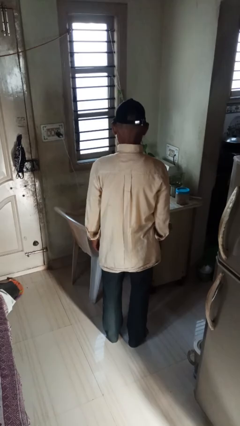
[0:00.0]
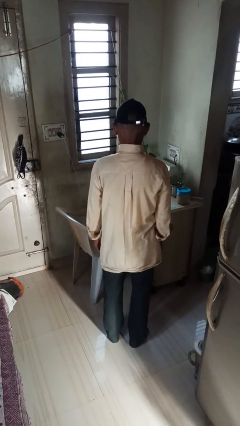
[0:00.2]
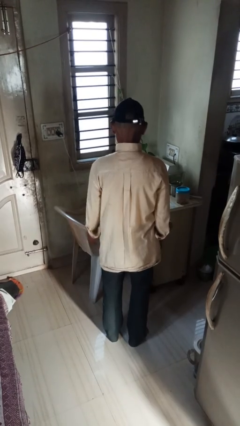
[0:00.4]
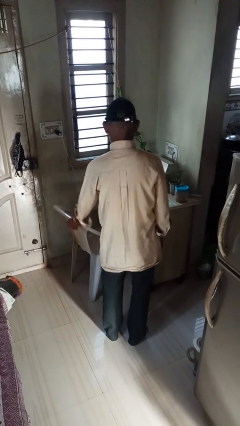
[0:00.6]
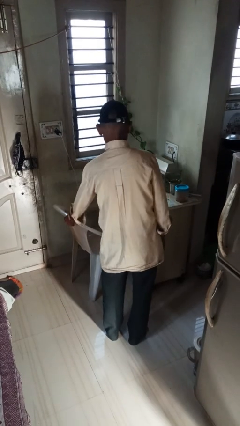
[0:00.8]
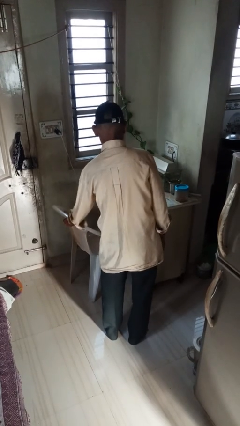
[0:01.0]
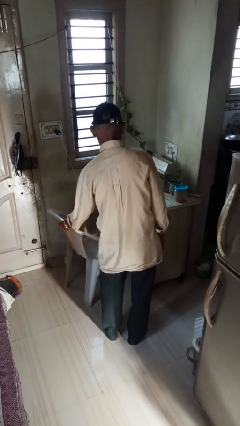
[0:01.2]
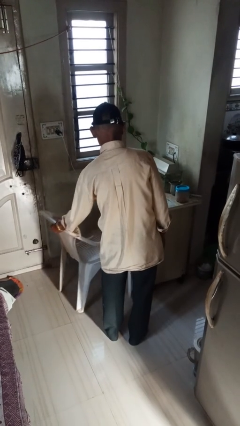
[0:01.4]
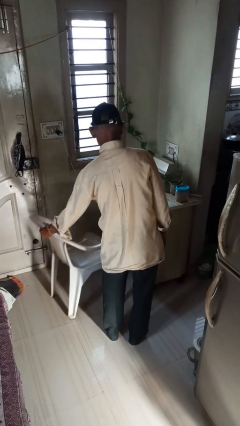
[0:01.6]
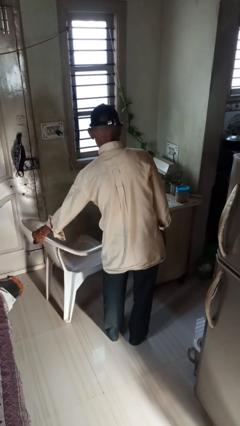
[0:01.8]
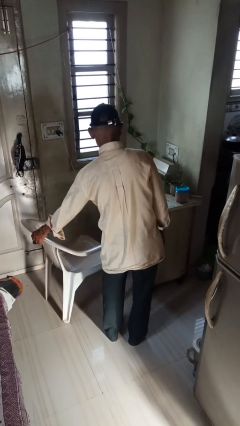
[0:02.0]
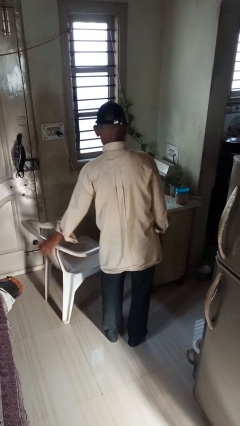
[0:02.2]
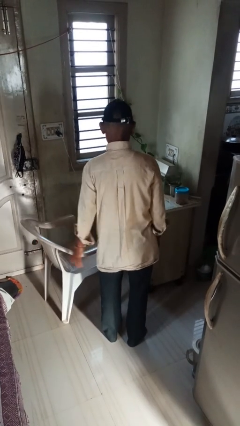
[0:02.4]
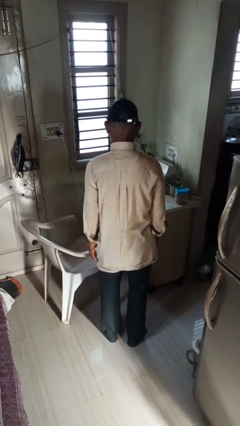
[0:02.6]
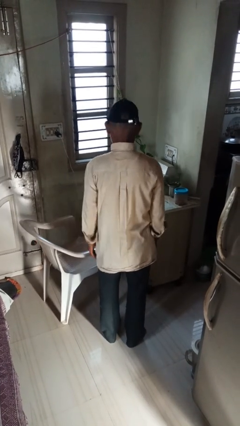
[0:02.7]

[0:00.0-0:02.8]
person pulls out chair

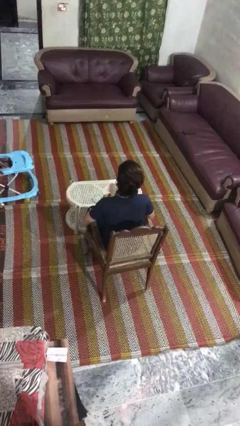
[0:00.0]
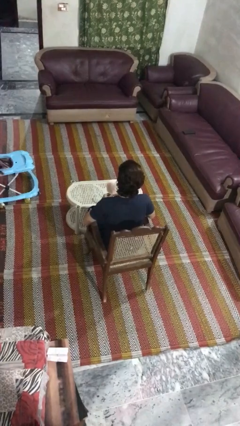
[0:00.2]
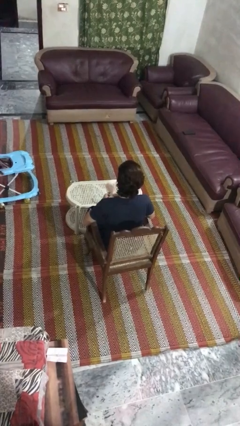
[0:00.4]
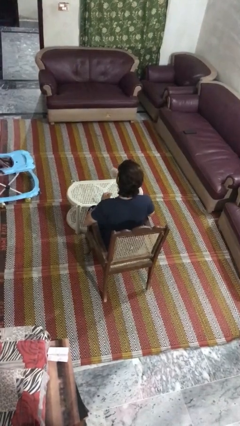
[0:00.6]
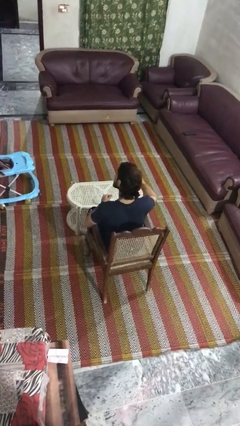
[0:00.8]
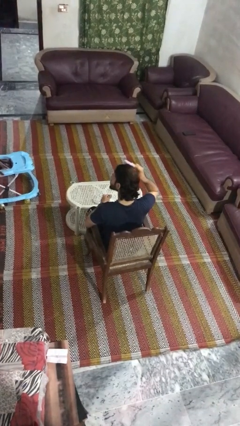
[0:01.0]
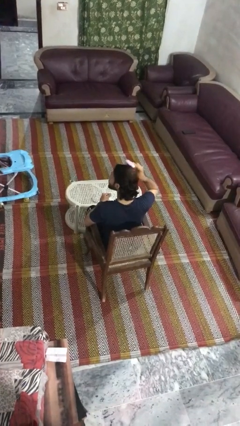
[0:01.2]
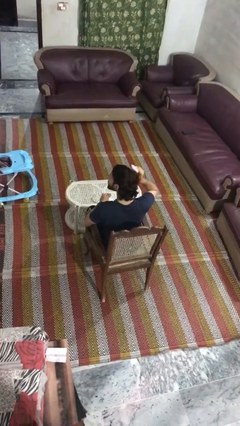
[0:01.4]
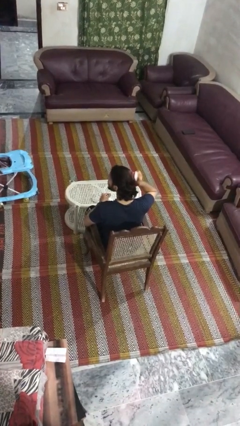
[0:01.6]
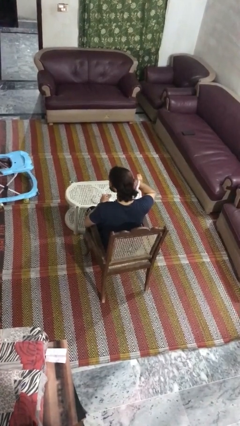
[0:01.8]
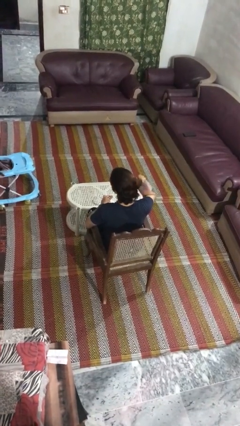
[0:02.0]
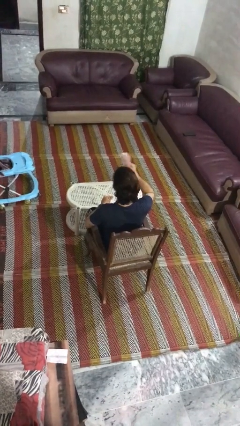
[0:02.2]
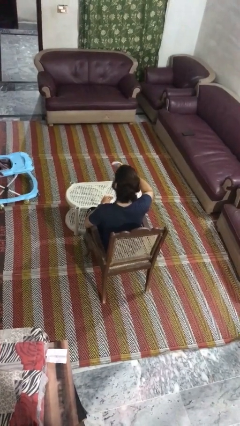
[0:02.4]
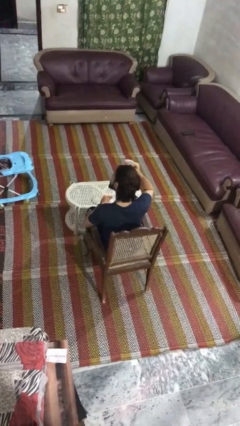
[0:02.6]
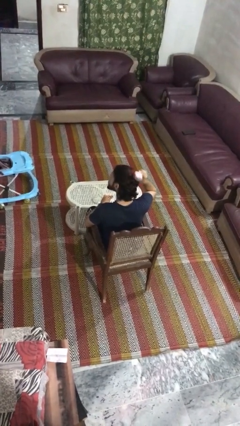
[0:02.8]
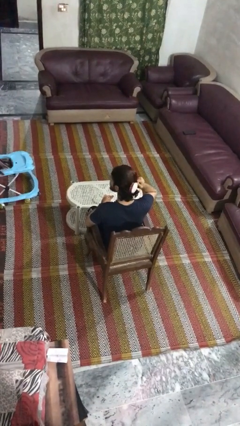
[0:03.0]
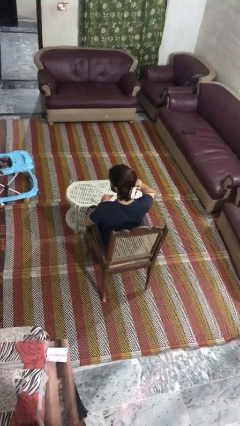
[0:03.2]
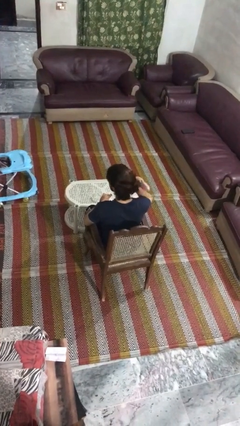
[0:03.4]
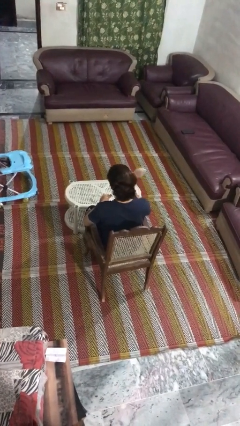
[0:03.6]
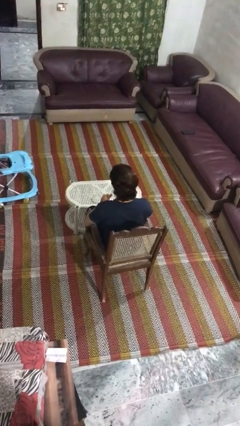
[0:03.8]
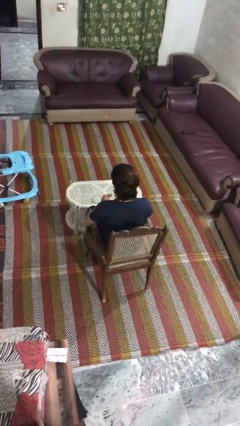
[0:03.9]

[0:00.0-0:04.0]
person brushes hair

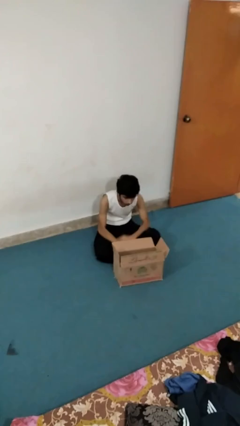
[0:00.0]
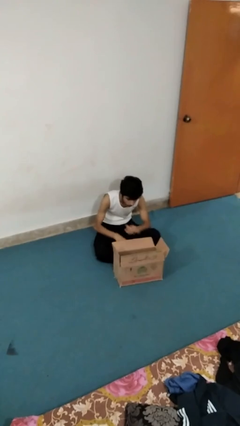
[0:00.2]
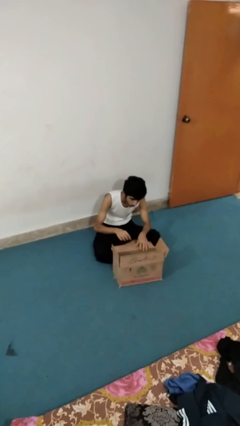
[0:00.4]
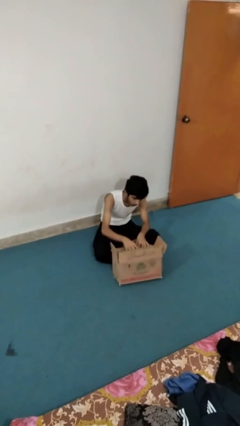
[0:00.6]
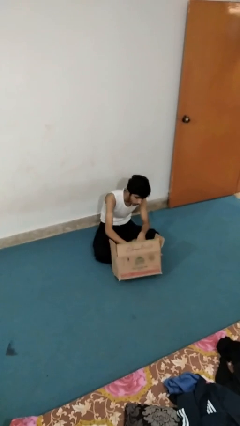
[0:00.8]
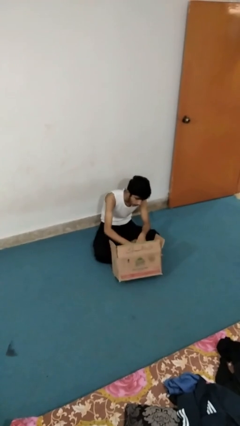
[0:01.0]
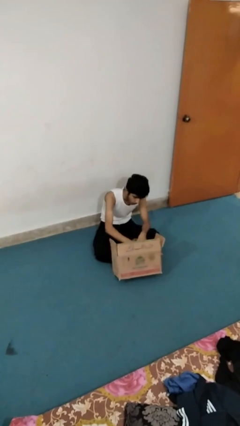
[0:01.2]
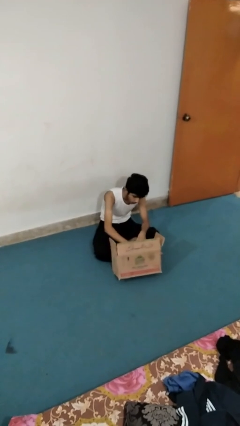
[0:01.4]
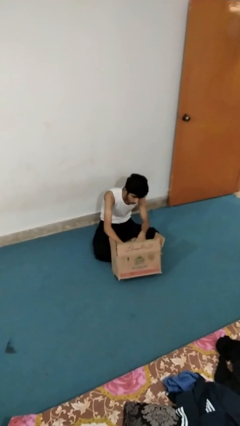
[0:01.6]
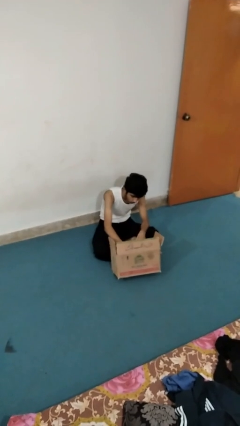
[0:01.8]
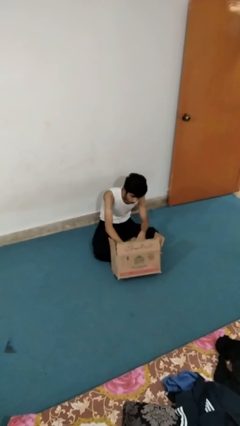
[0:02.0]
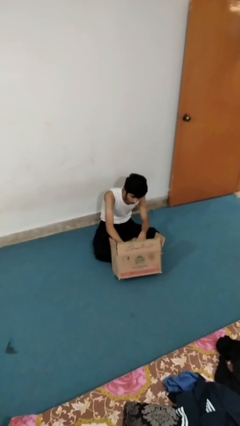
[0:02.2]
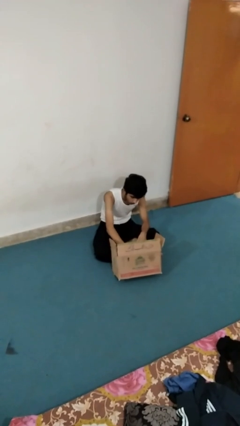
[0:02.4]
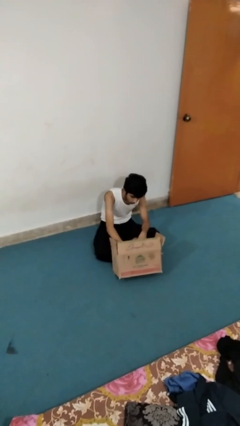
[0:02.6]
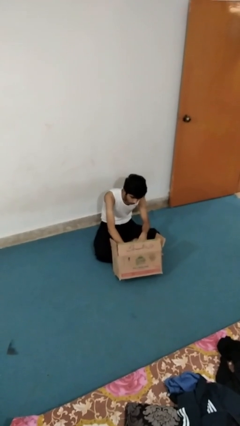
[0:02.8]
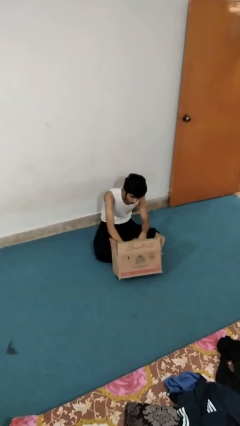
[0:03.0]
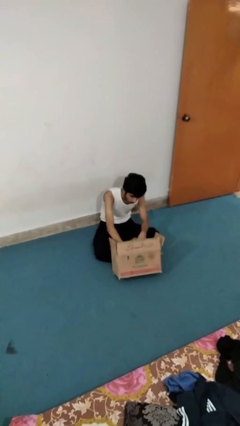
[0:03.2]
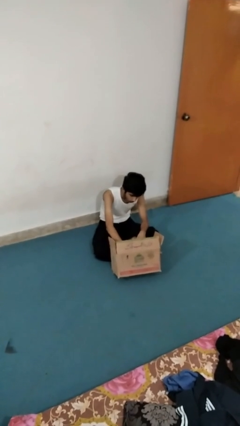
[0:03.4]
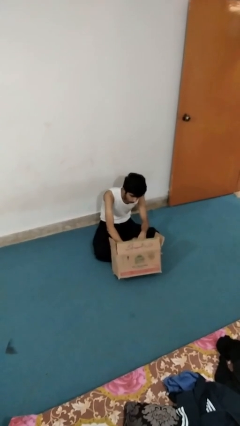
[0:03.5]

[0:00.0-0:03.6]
person searches in box

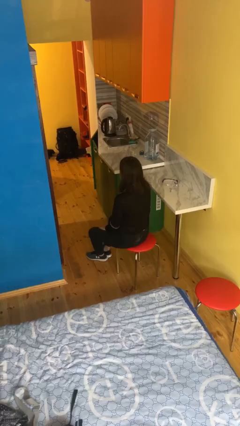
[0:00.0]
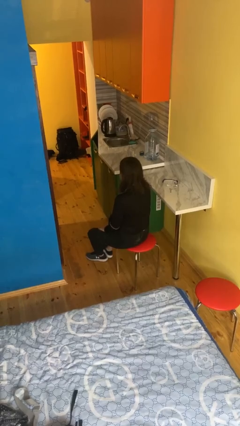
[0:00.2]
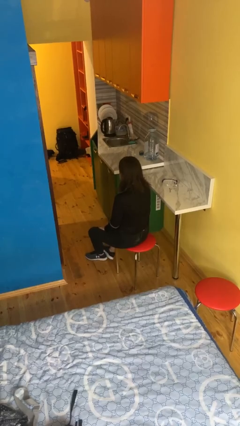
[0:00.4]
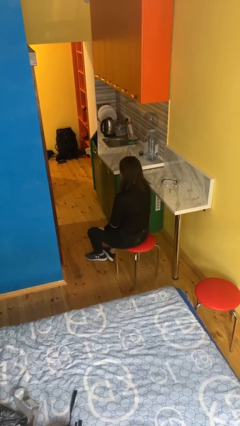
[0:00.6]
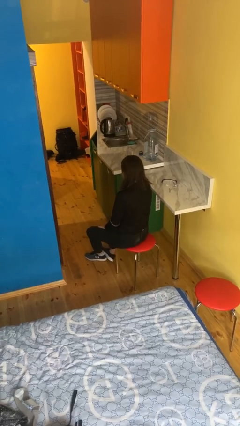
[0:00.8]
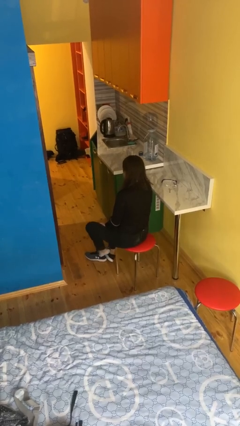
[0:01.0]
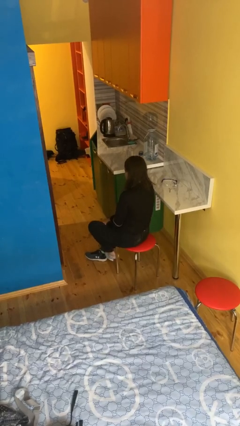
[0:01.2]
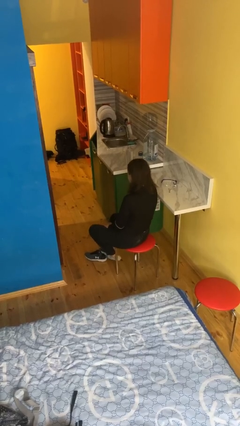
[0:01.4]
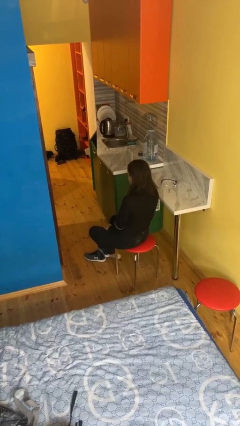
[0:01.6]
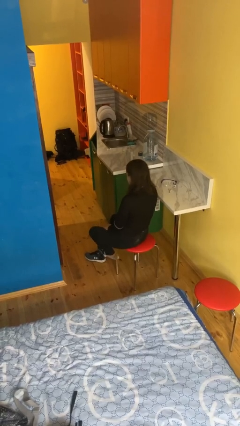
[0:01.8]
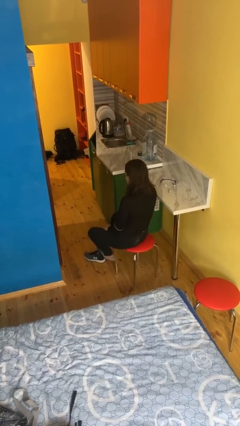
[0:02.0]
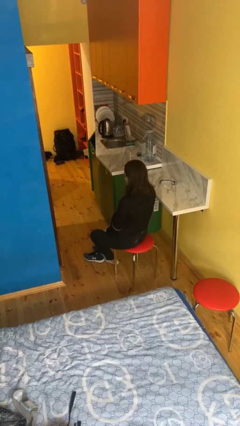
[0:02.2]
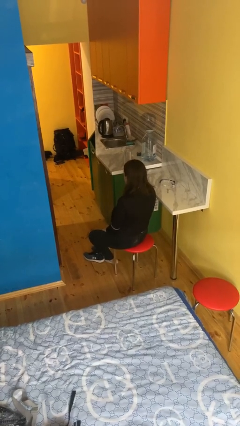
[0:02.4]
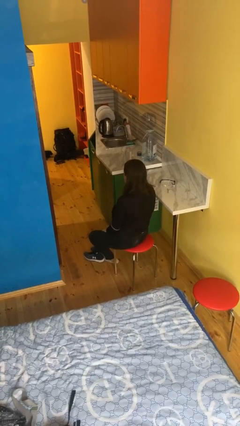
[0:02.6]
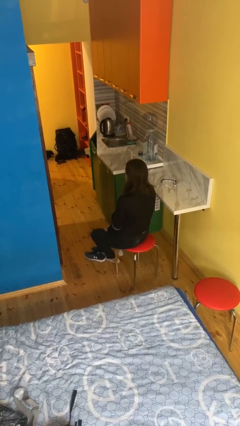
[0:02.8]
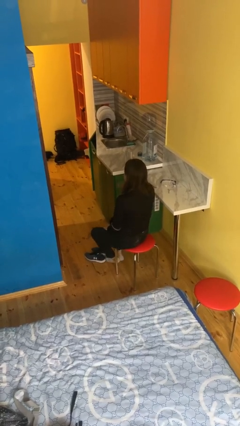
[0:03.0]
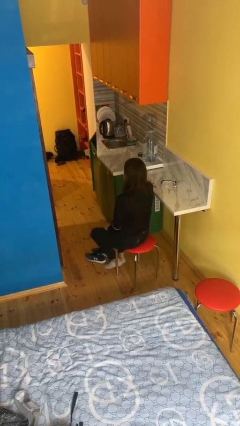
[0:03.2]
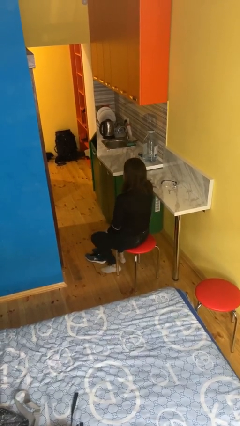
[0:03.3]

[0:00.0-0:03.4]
person takes off shoes

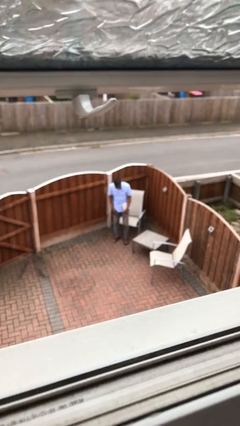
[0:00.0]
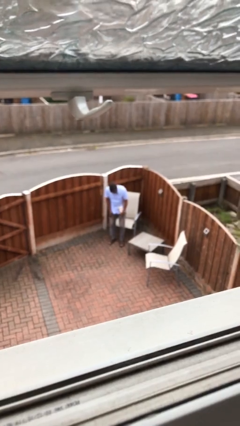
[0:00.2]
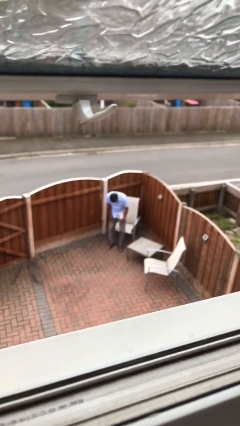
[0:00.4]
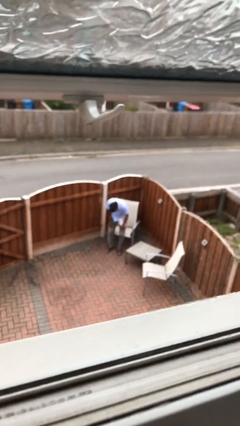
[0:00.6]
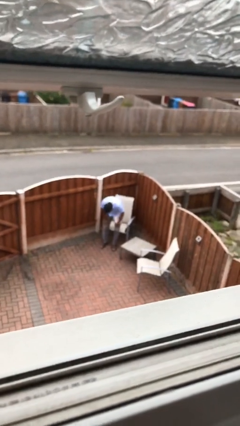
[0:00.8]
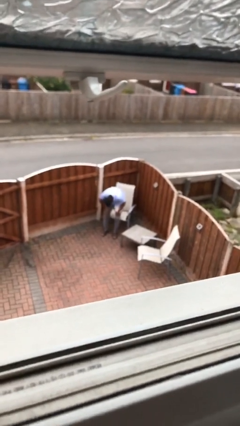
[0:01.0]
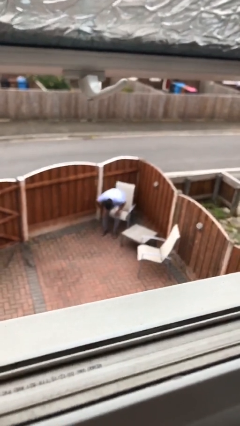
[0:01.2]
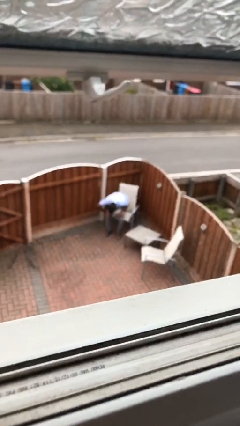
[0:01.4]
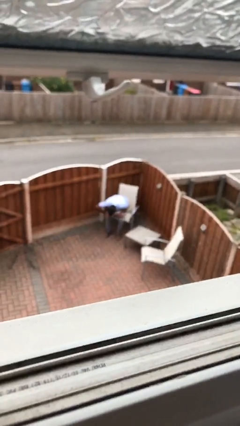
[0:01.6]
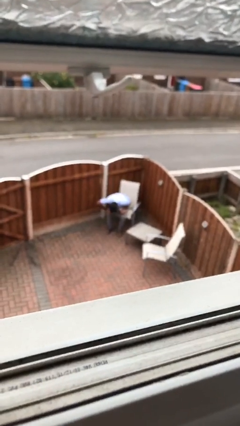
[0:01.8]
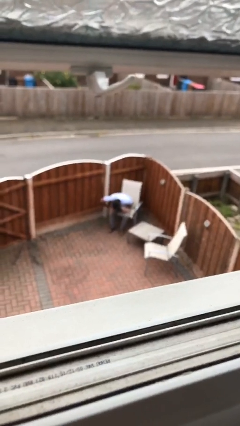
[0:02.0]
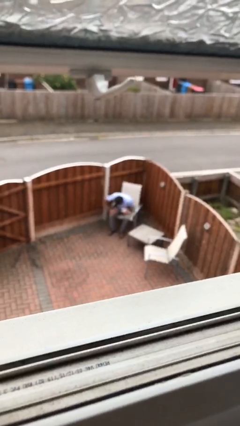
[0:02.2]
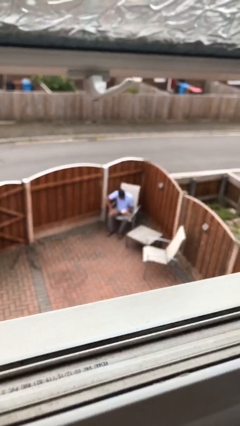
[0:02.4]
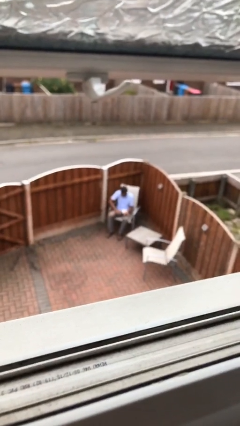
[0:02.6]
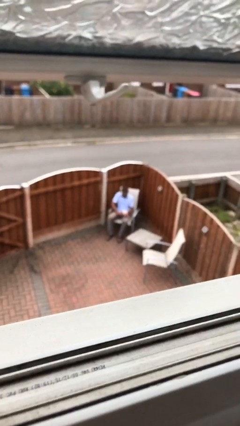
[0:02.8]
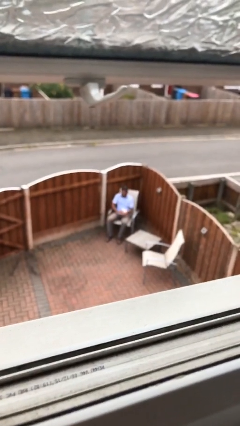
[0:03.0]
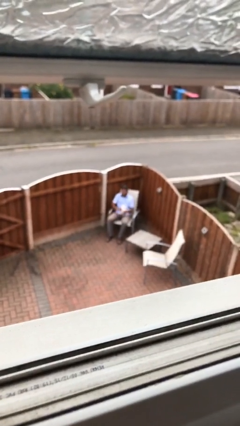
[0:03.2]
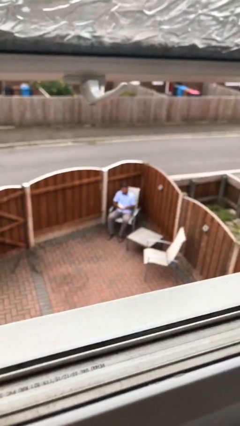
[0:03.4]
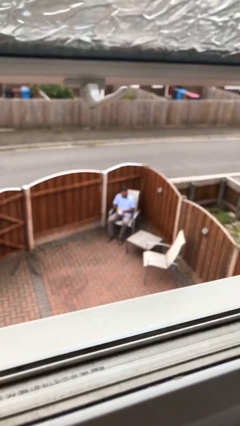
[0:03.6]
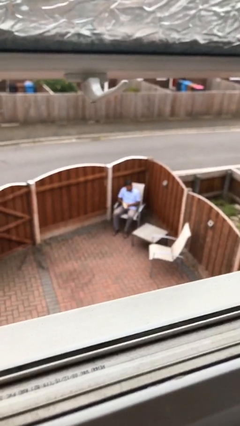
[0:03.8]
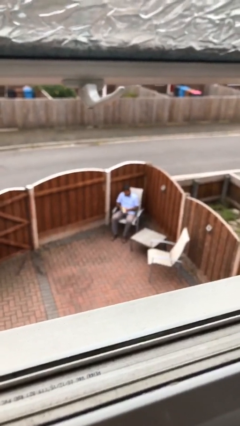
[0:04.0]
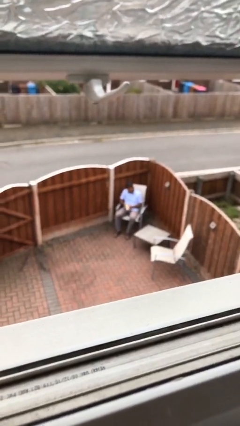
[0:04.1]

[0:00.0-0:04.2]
person sits down
